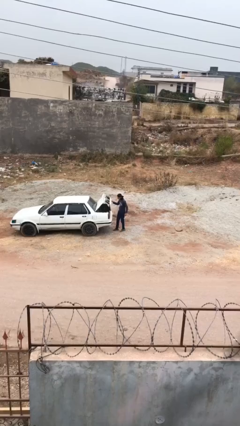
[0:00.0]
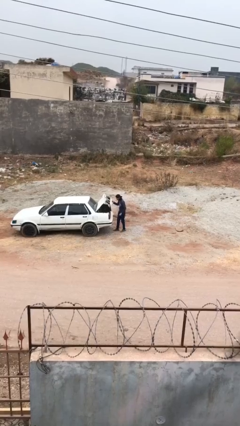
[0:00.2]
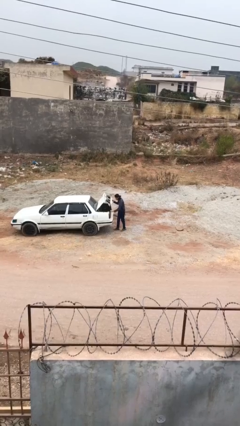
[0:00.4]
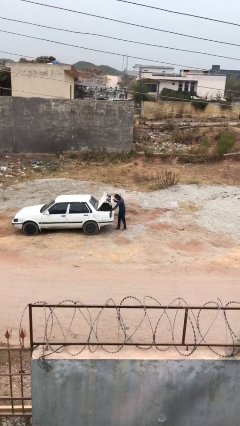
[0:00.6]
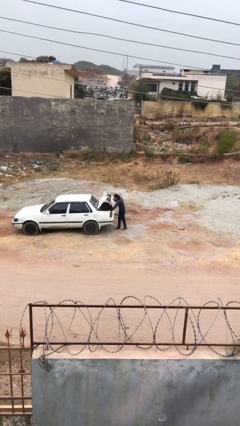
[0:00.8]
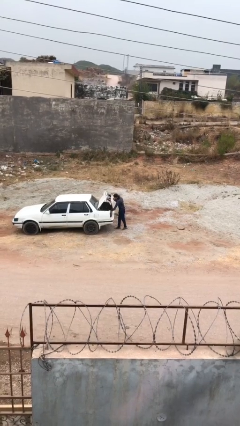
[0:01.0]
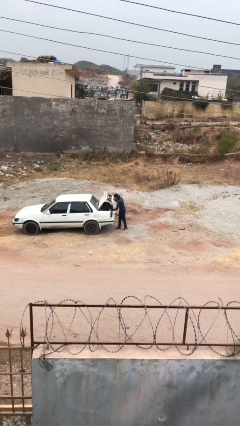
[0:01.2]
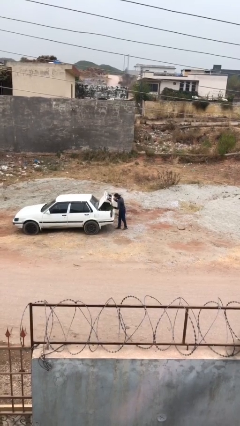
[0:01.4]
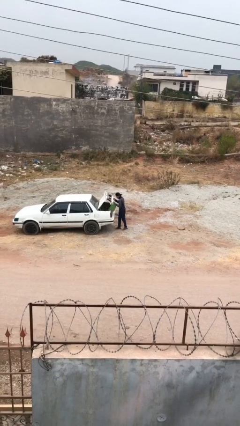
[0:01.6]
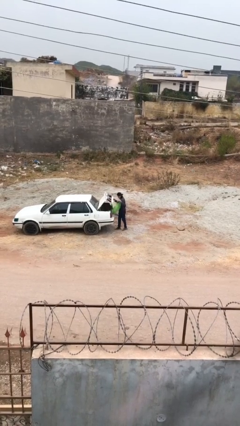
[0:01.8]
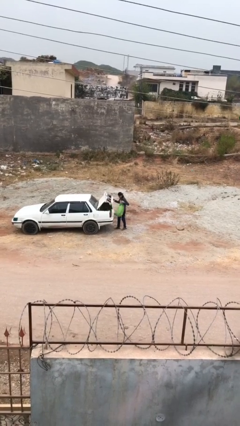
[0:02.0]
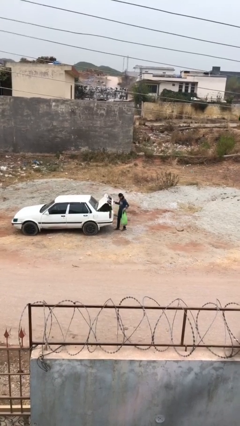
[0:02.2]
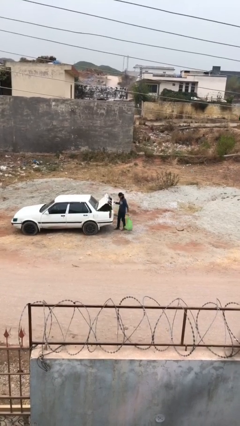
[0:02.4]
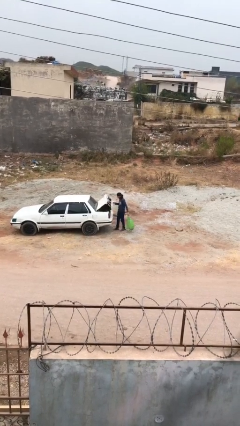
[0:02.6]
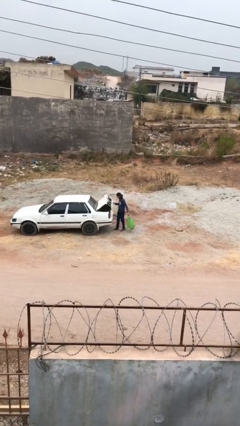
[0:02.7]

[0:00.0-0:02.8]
person unloads car

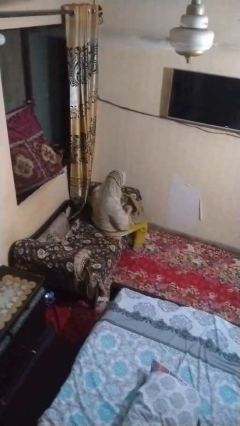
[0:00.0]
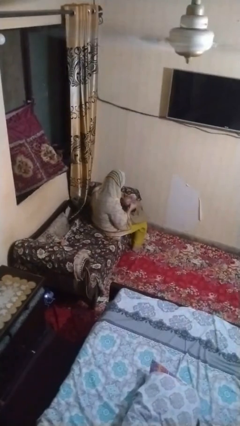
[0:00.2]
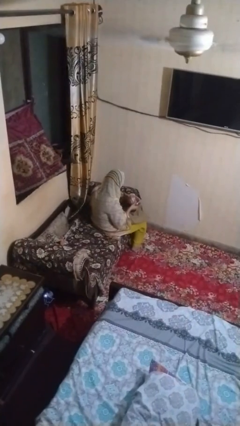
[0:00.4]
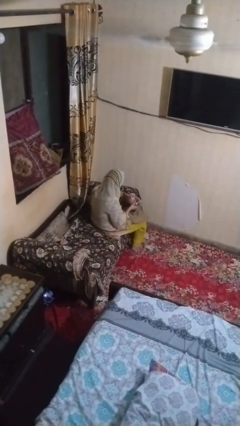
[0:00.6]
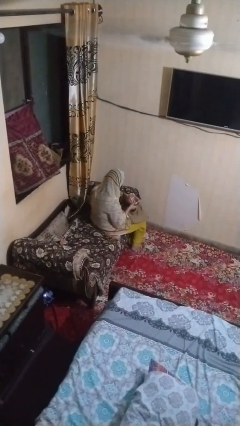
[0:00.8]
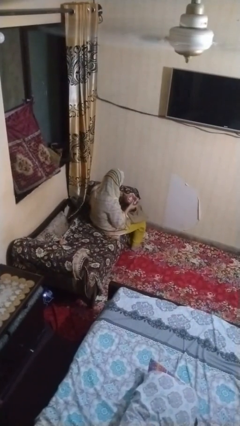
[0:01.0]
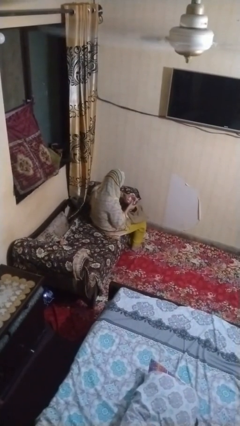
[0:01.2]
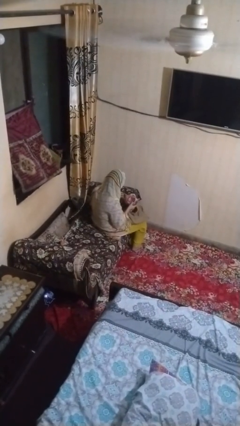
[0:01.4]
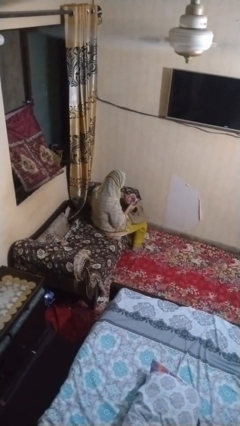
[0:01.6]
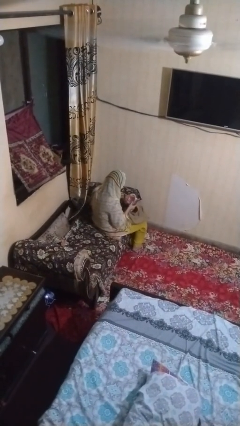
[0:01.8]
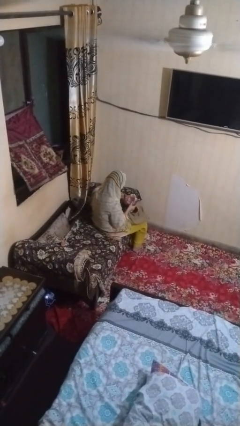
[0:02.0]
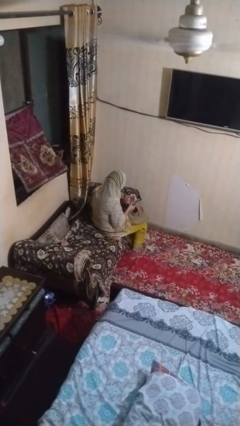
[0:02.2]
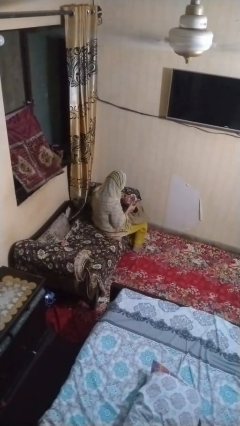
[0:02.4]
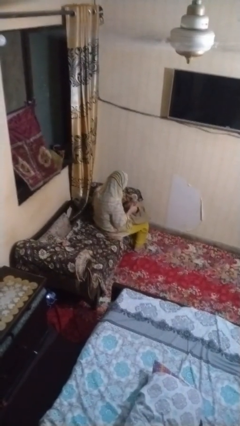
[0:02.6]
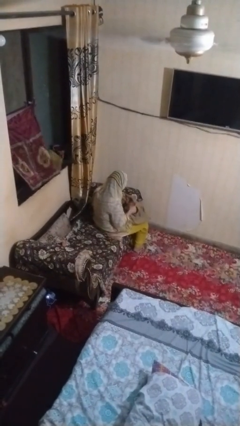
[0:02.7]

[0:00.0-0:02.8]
person takes object from bag

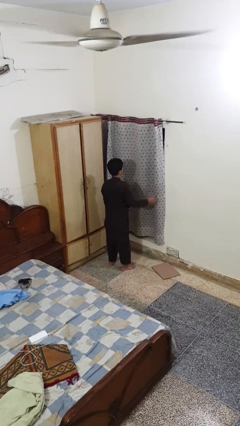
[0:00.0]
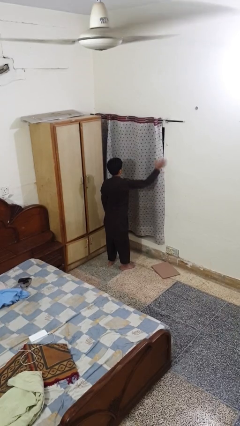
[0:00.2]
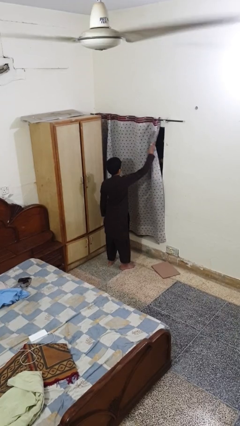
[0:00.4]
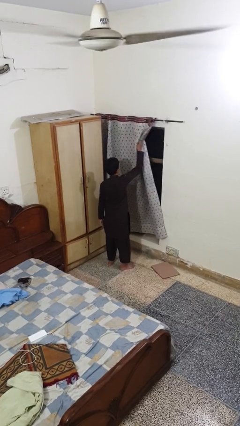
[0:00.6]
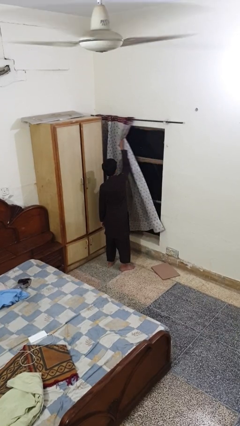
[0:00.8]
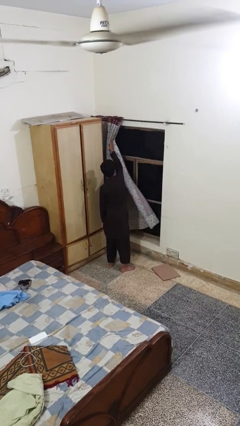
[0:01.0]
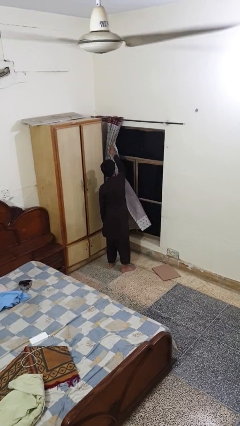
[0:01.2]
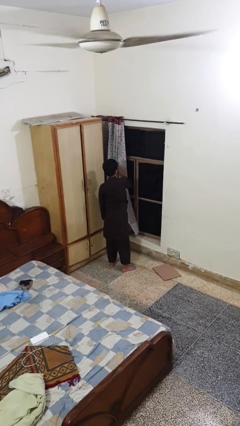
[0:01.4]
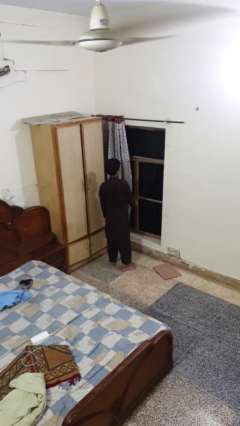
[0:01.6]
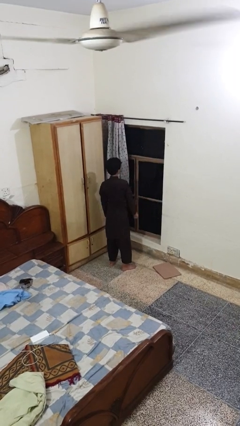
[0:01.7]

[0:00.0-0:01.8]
person opens curtains

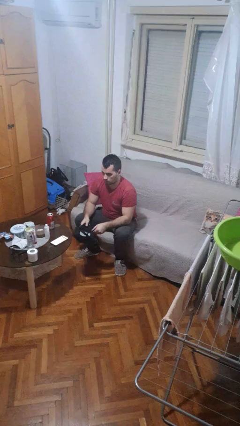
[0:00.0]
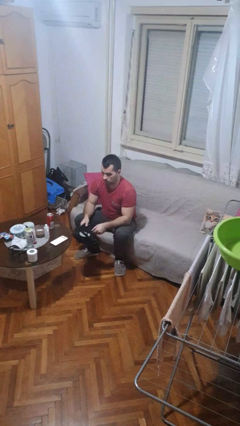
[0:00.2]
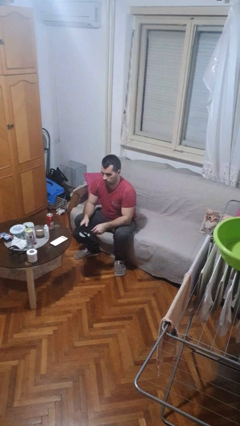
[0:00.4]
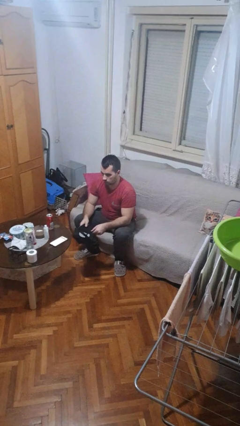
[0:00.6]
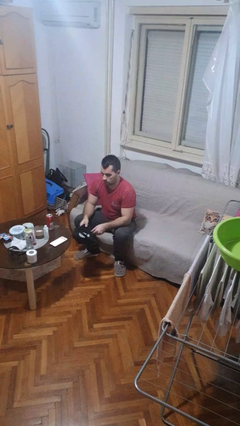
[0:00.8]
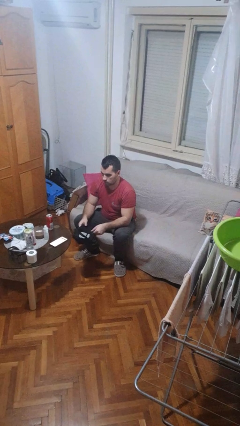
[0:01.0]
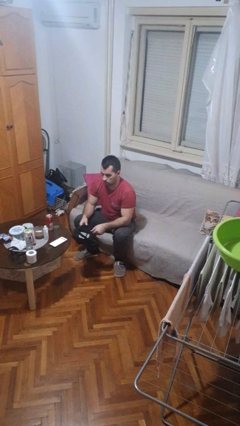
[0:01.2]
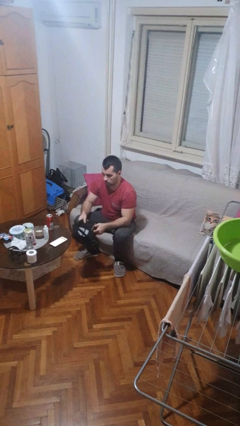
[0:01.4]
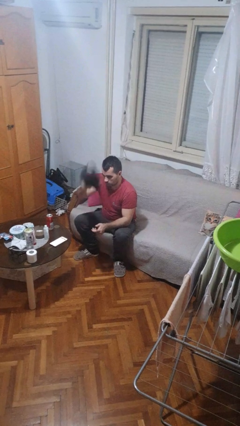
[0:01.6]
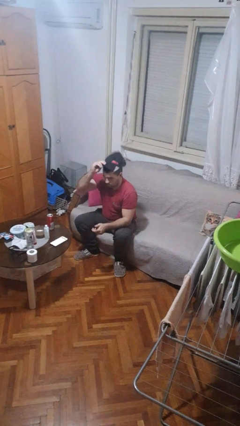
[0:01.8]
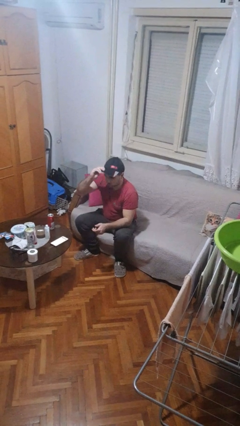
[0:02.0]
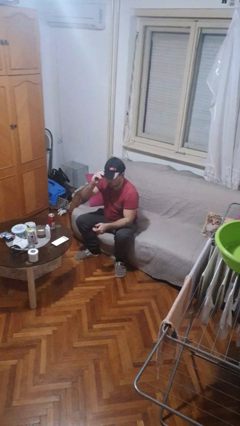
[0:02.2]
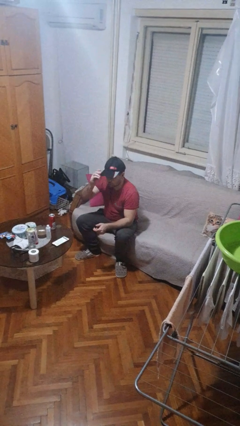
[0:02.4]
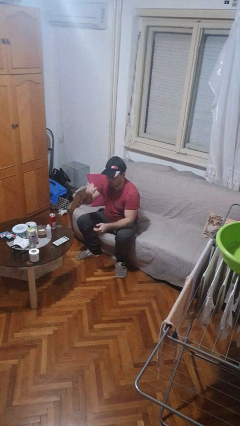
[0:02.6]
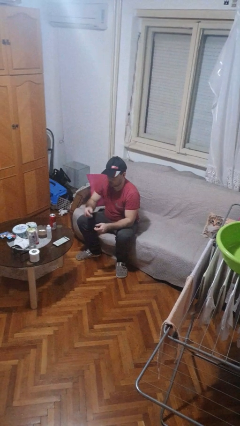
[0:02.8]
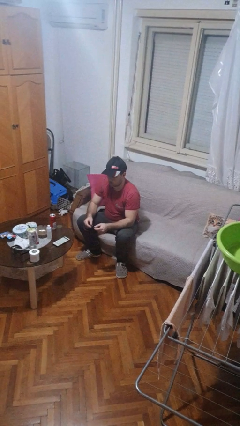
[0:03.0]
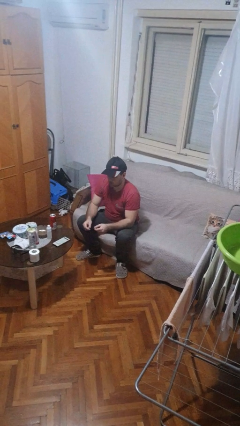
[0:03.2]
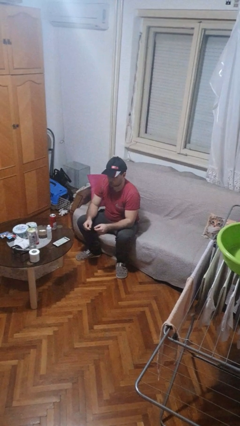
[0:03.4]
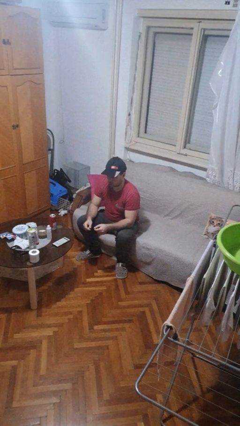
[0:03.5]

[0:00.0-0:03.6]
person puts on hat

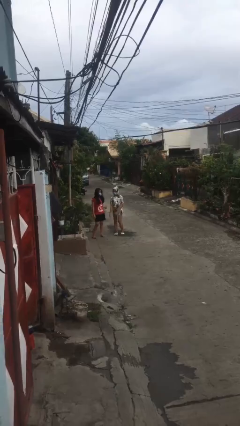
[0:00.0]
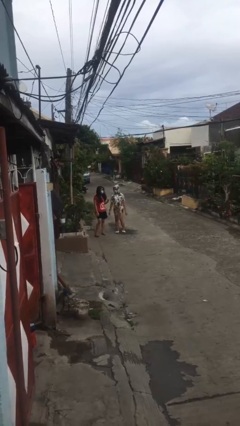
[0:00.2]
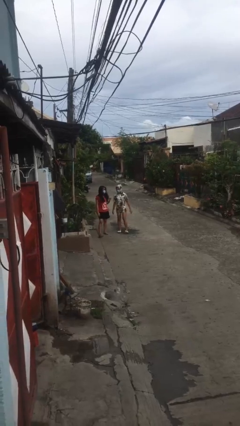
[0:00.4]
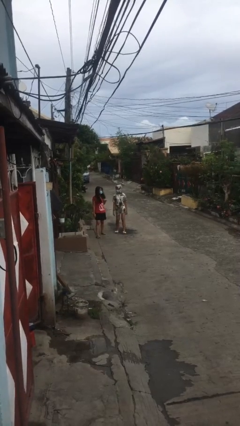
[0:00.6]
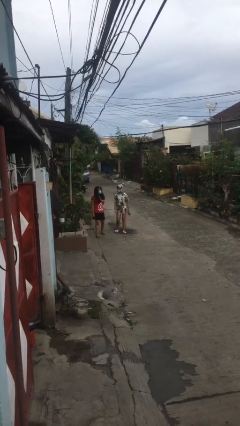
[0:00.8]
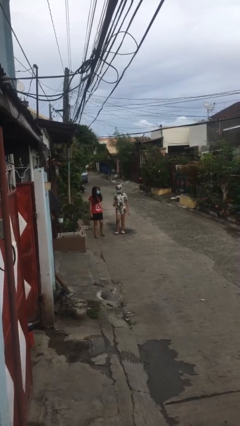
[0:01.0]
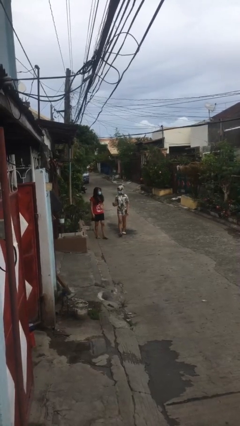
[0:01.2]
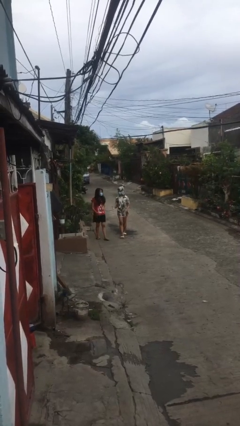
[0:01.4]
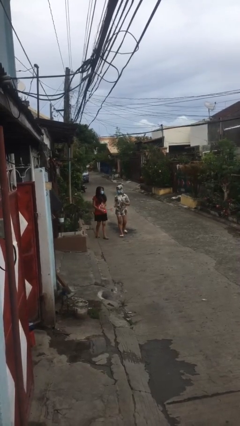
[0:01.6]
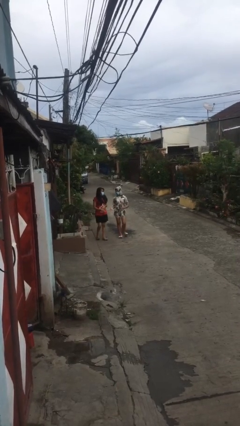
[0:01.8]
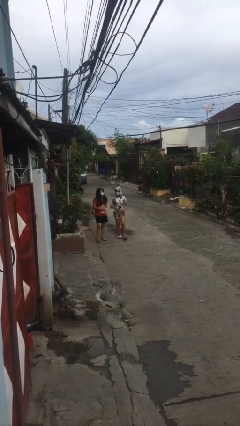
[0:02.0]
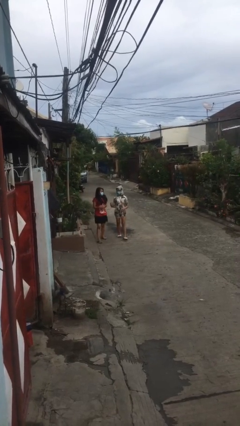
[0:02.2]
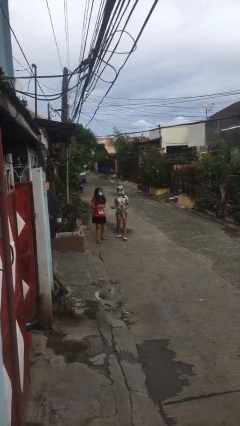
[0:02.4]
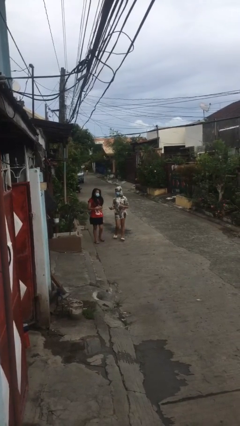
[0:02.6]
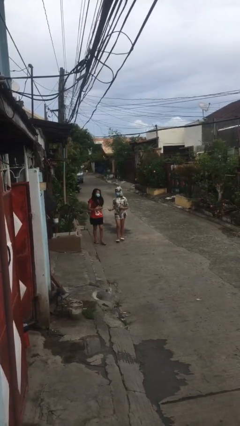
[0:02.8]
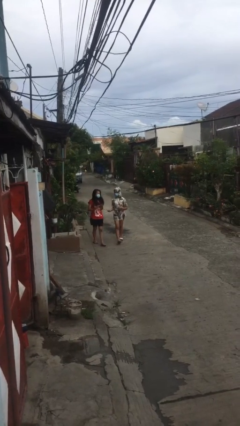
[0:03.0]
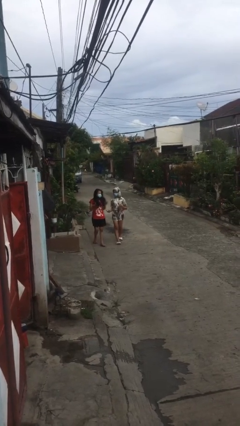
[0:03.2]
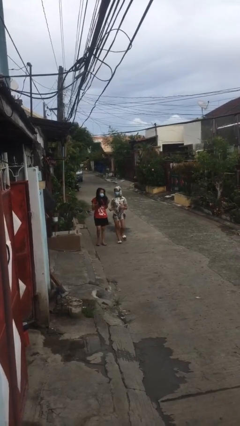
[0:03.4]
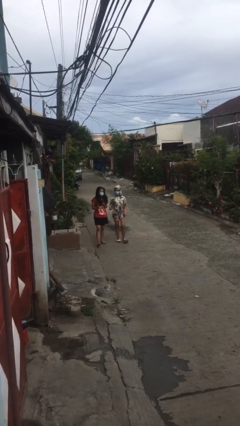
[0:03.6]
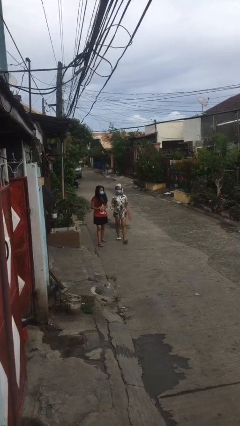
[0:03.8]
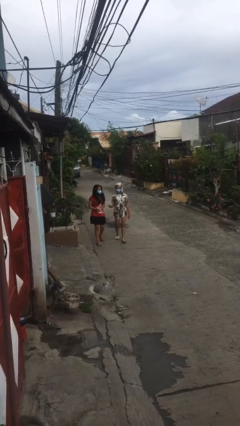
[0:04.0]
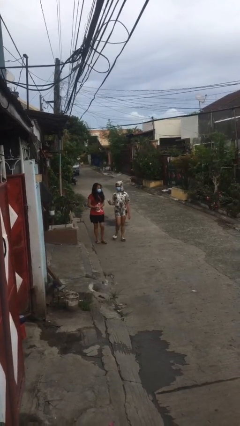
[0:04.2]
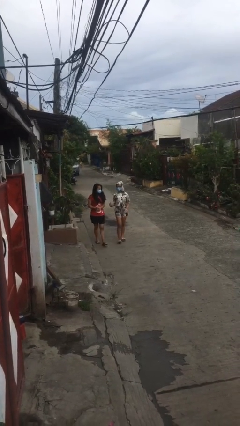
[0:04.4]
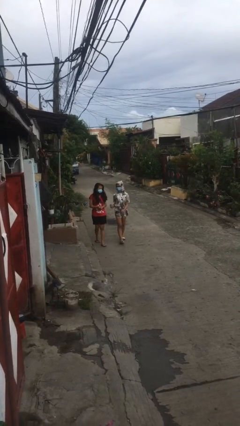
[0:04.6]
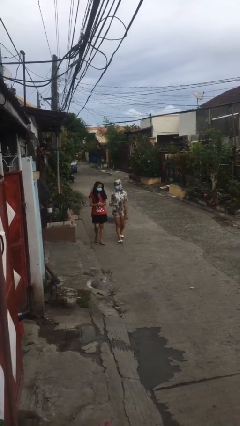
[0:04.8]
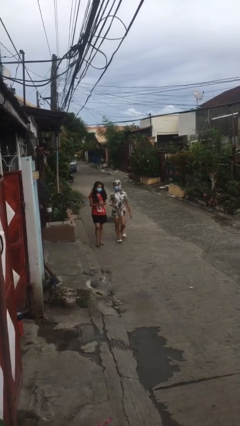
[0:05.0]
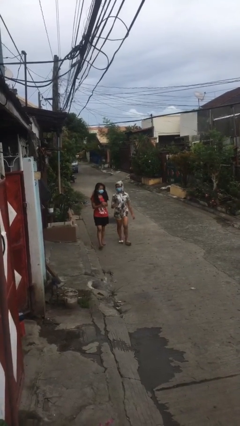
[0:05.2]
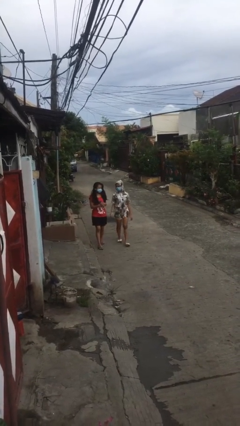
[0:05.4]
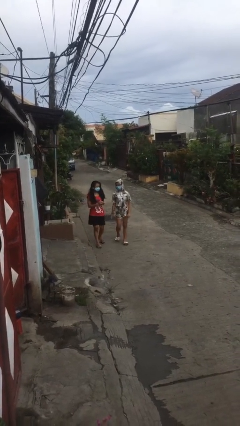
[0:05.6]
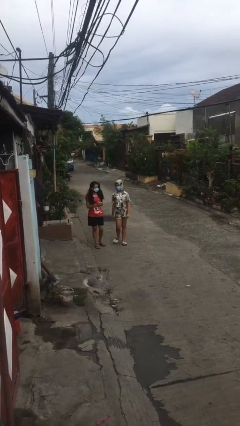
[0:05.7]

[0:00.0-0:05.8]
person talks to person

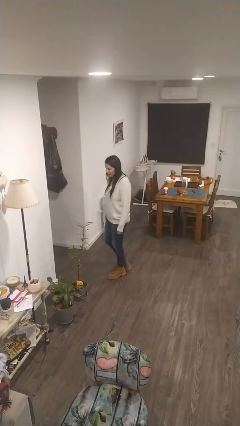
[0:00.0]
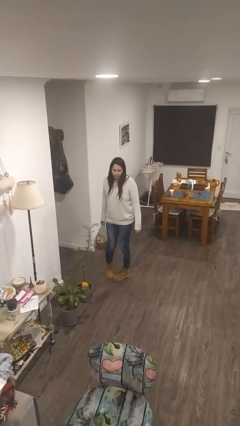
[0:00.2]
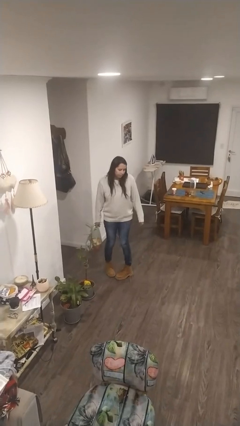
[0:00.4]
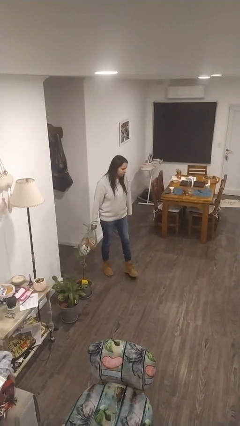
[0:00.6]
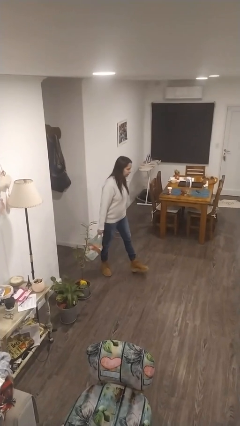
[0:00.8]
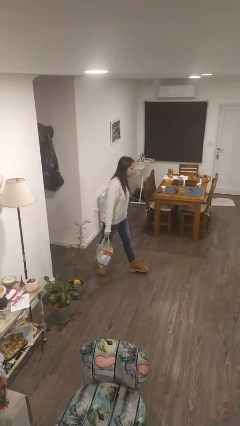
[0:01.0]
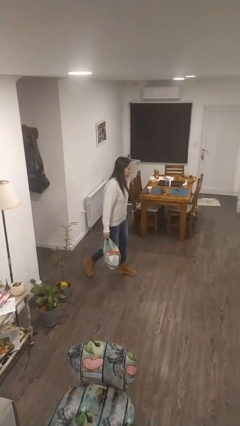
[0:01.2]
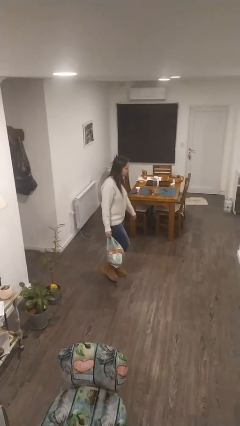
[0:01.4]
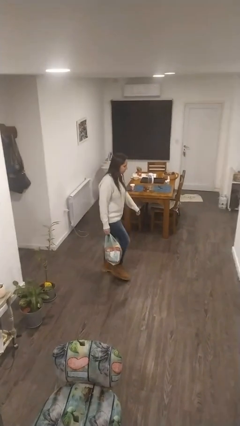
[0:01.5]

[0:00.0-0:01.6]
person carries groceries
